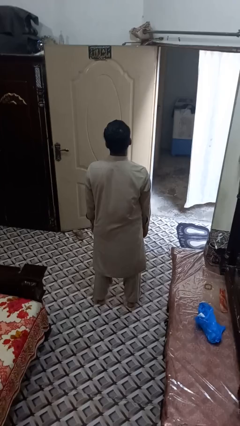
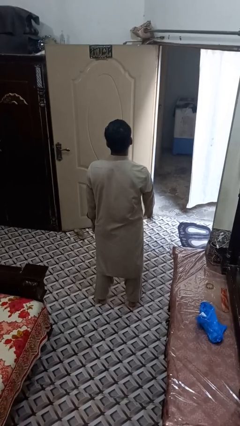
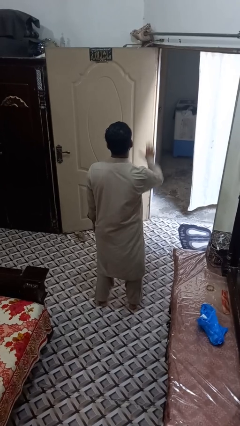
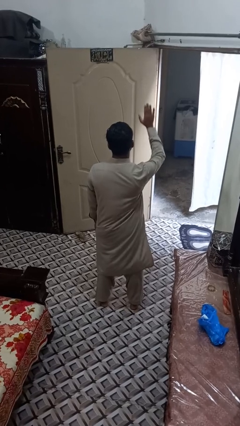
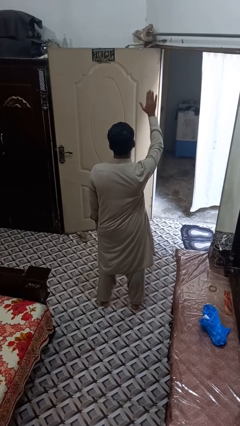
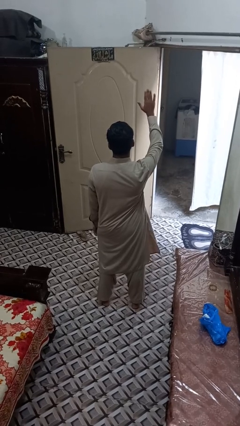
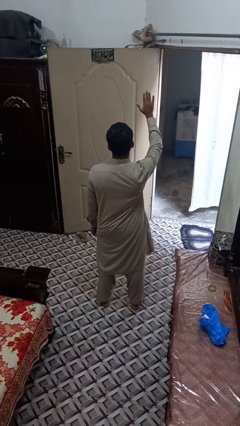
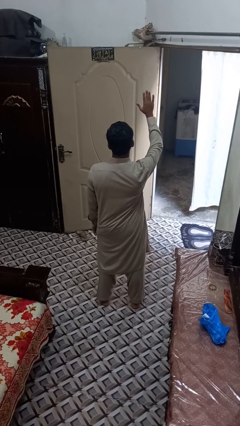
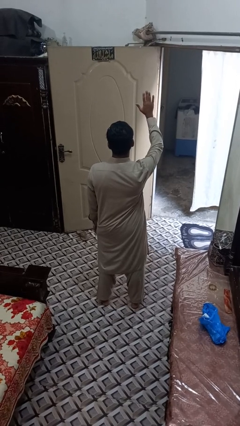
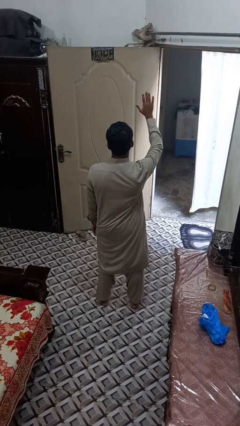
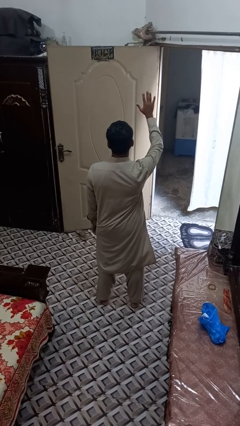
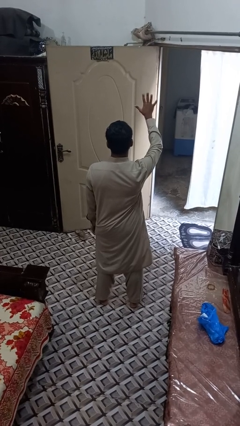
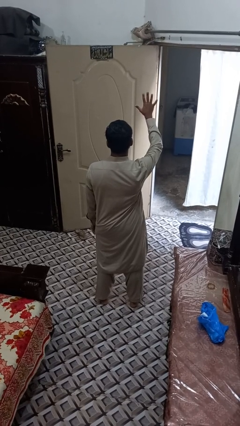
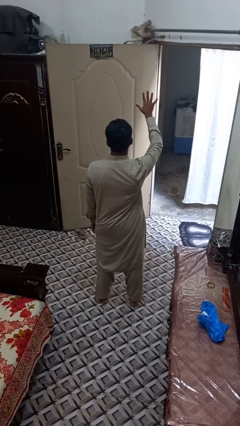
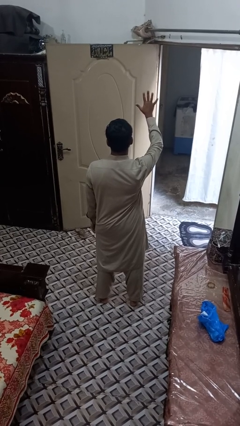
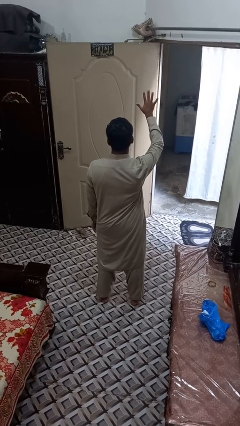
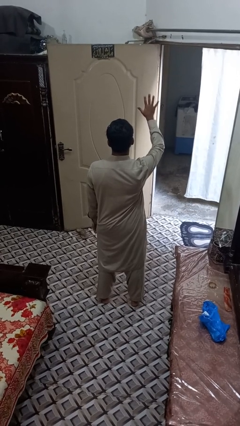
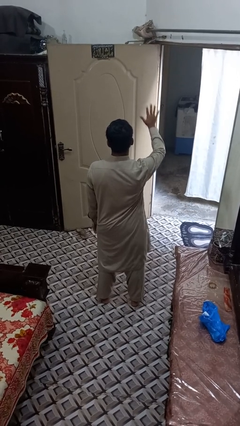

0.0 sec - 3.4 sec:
person gestures number five

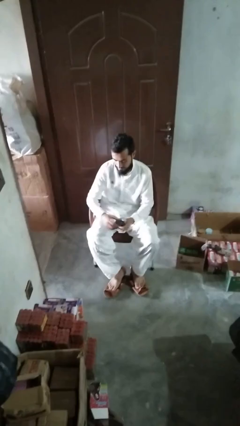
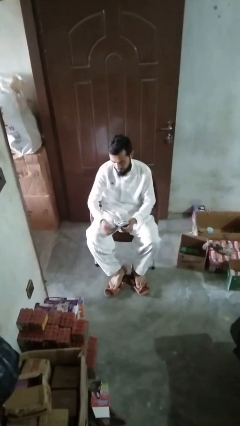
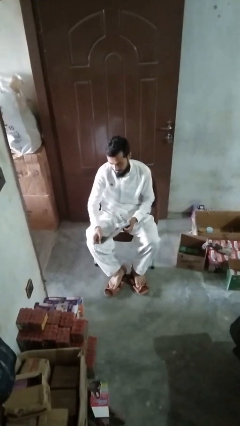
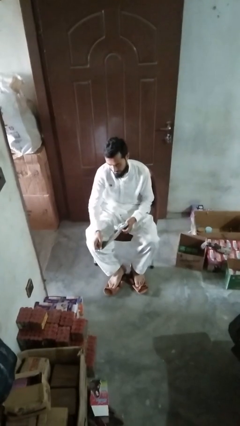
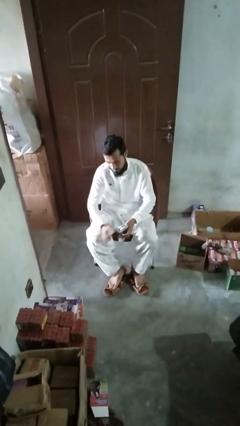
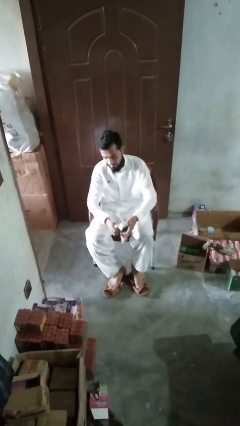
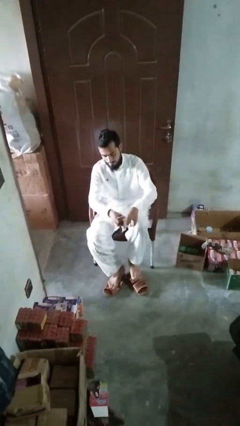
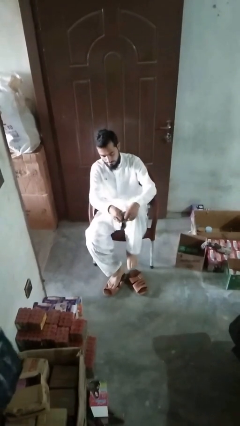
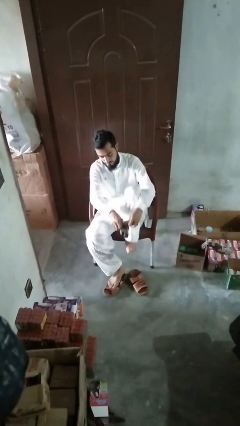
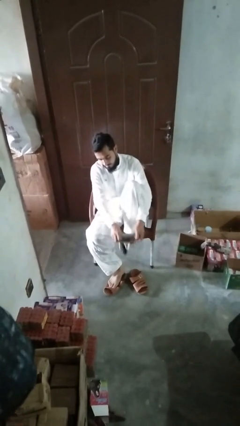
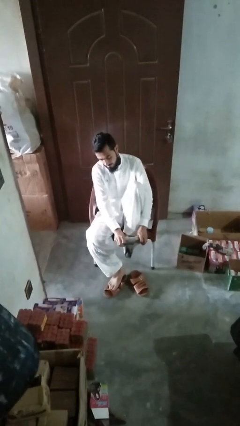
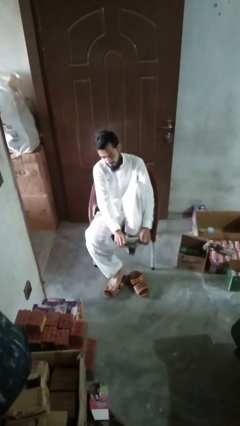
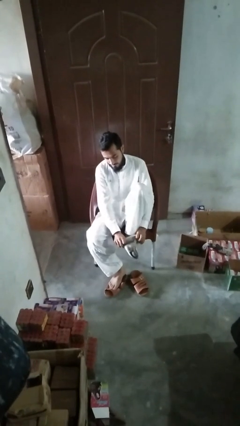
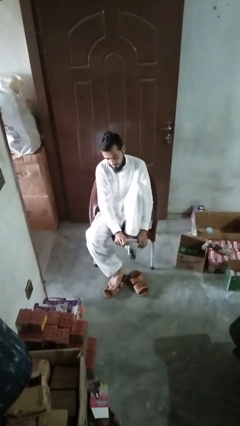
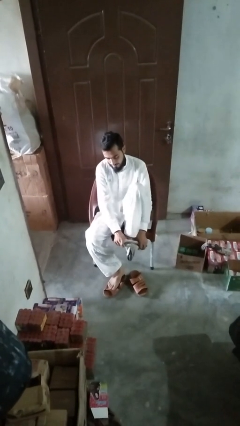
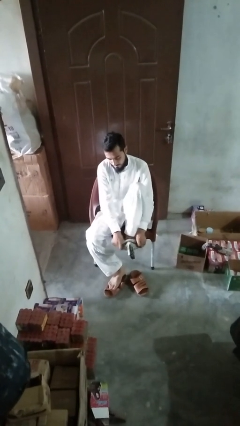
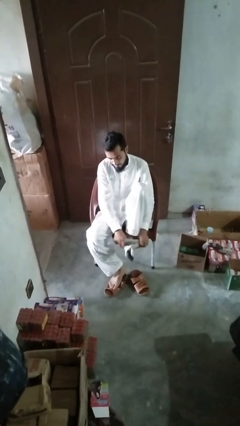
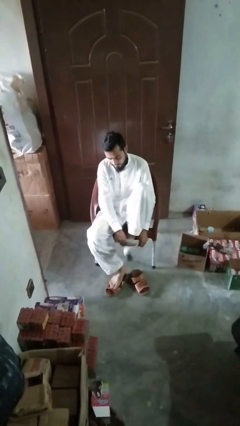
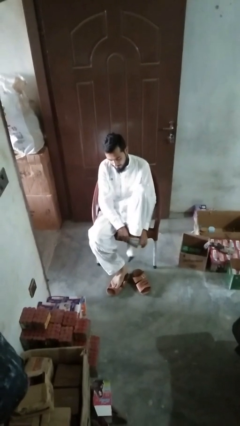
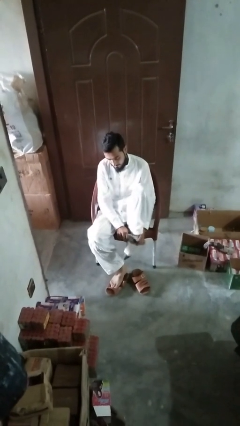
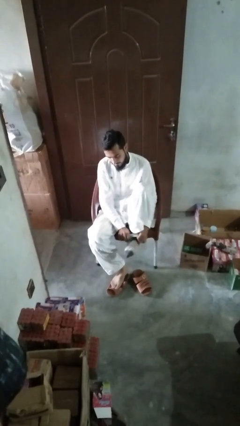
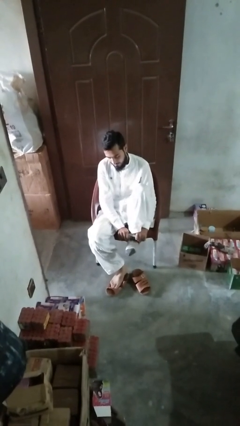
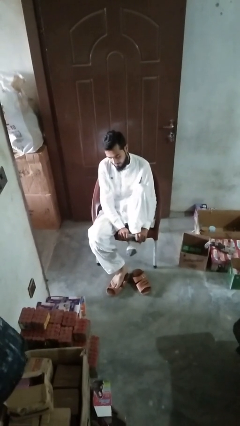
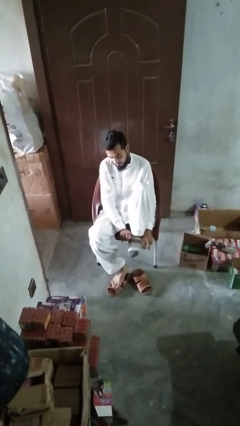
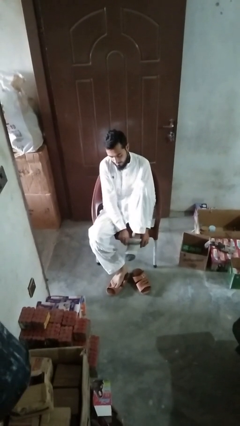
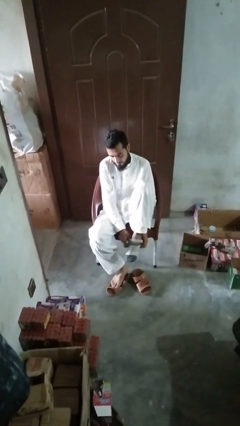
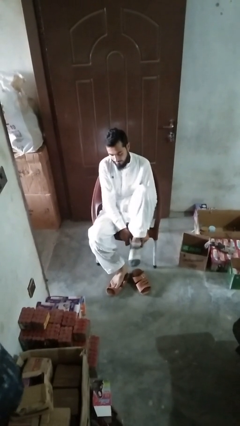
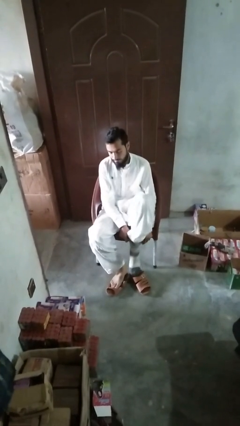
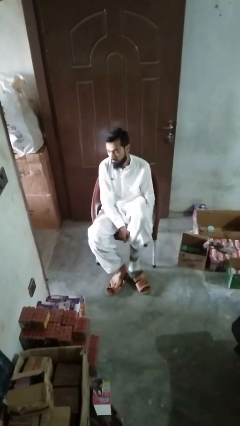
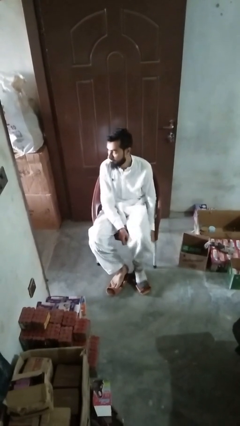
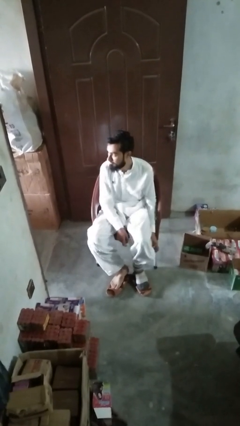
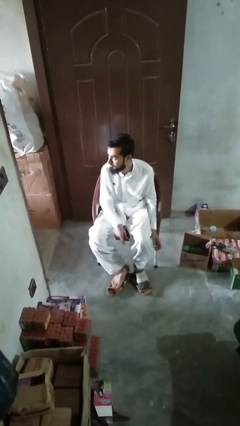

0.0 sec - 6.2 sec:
person puts on socks

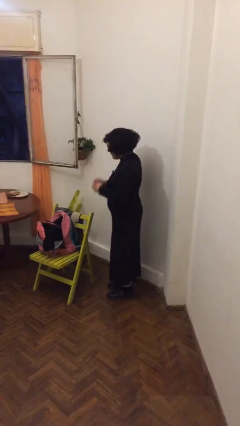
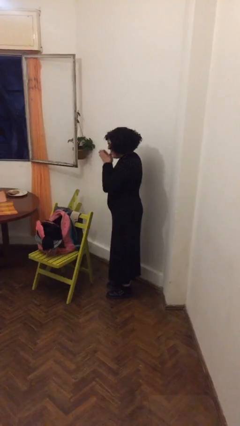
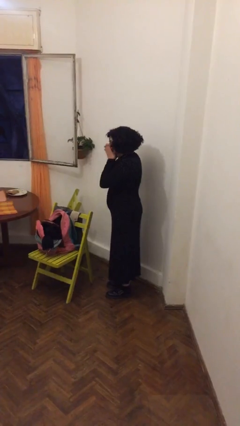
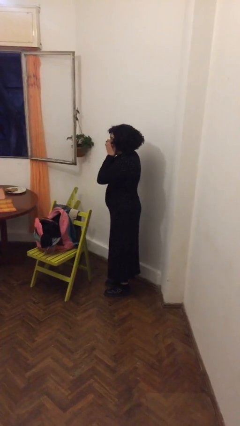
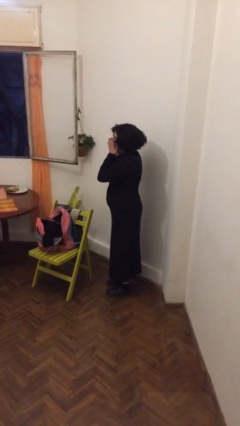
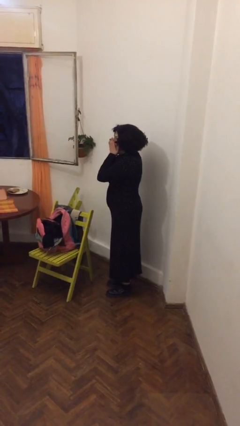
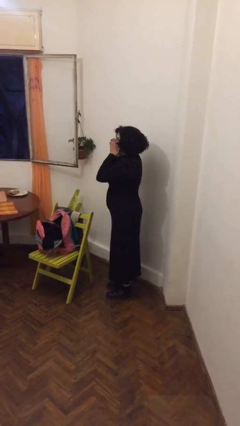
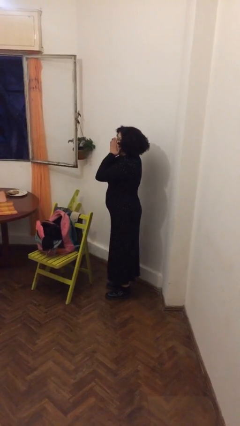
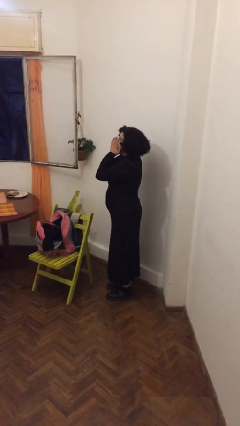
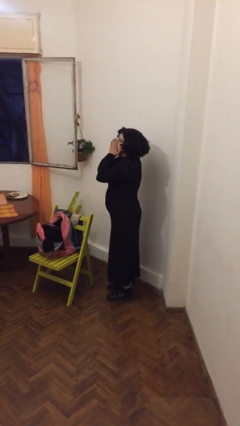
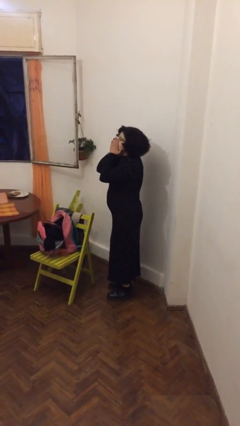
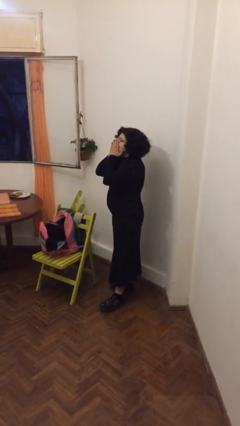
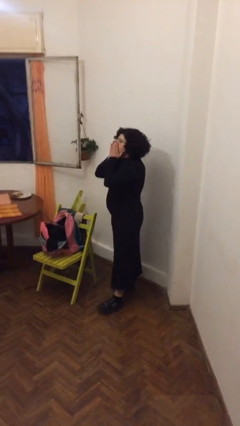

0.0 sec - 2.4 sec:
person yawns

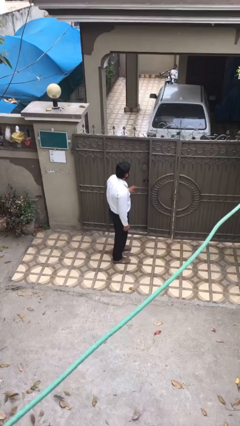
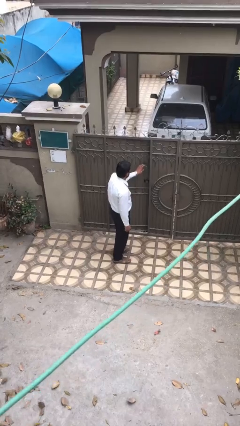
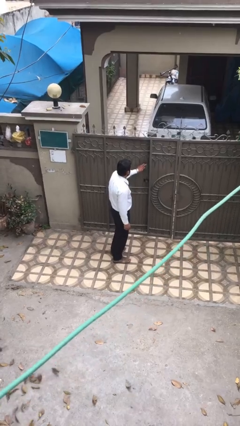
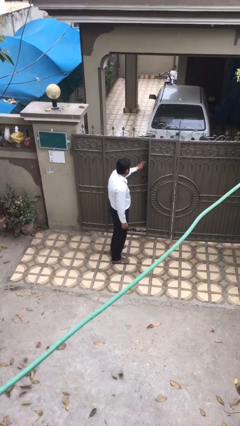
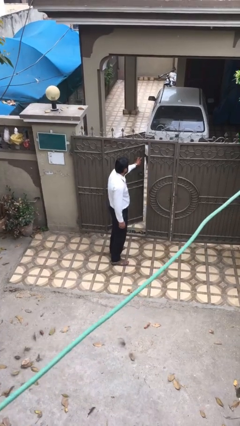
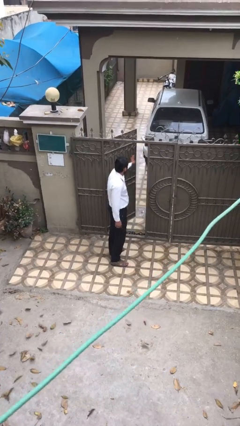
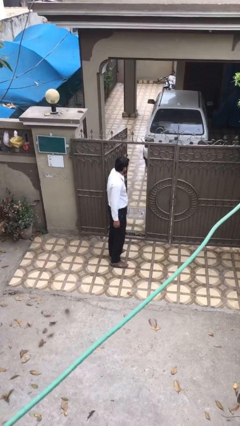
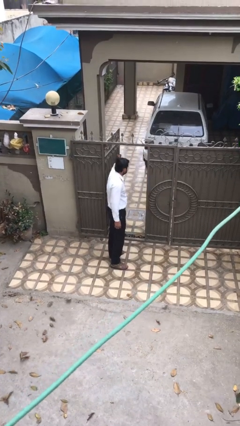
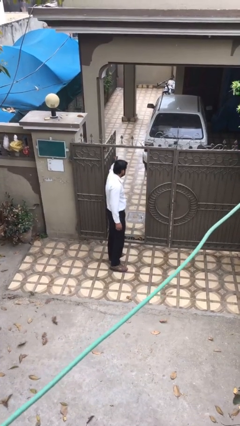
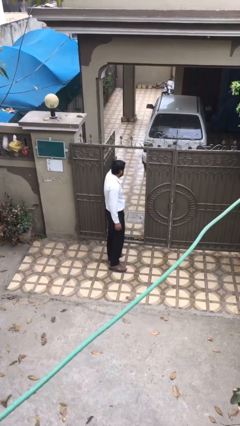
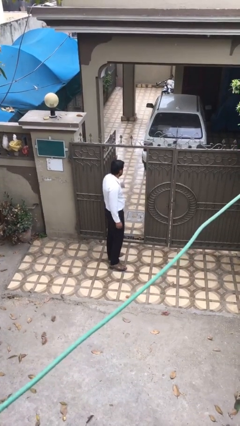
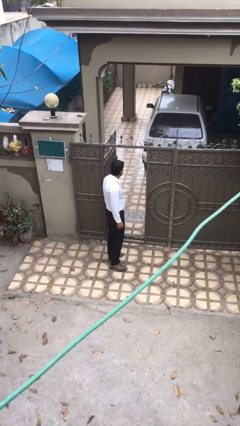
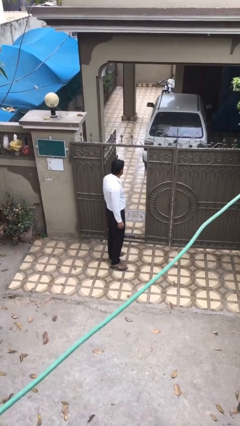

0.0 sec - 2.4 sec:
person opens facility door

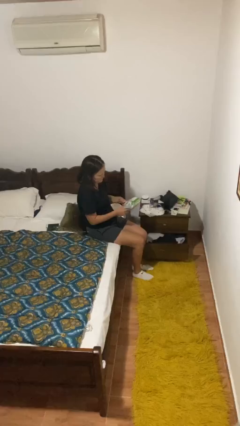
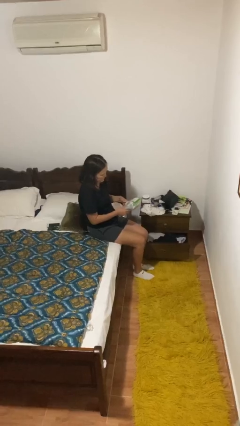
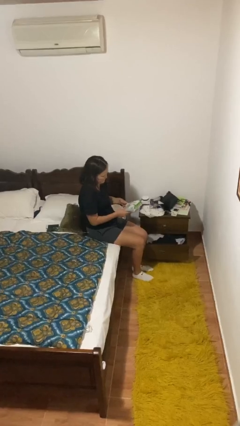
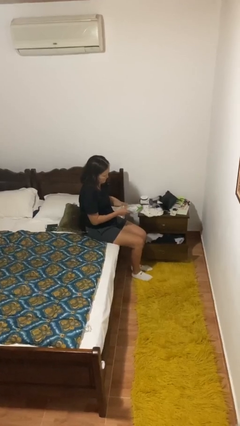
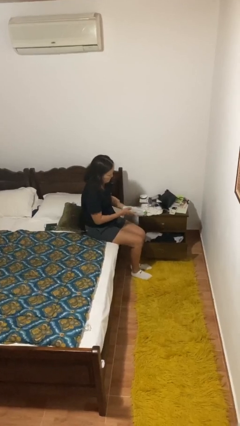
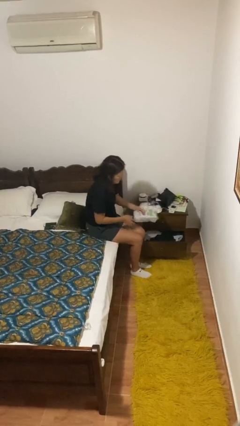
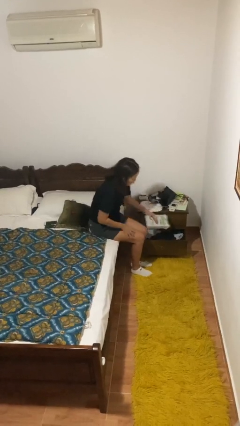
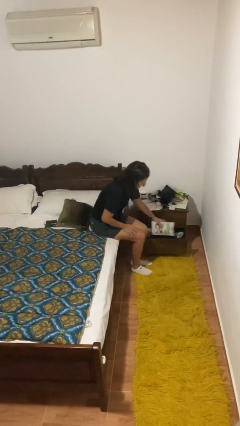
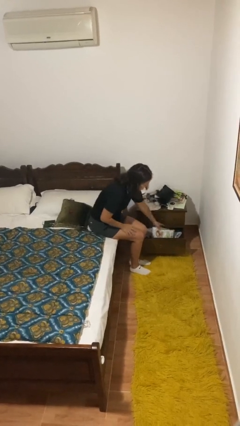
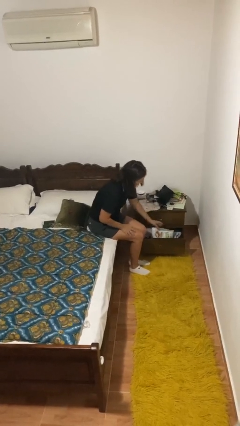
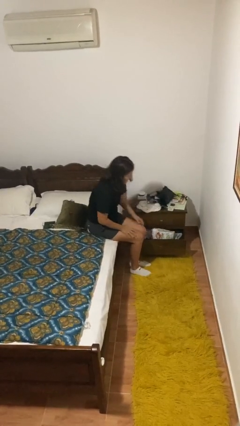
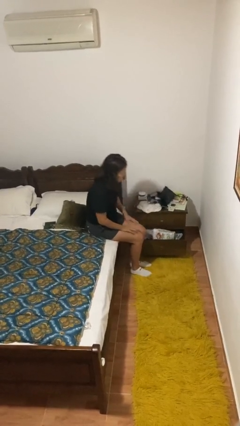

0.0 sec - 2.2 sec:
person puts down object into cabinet

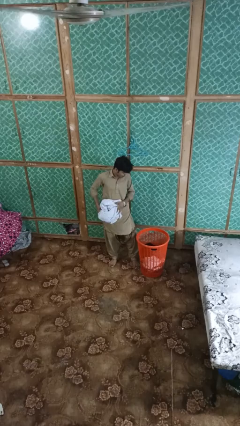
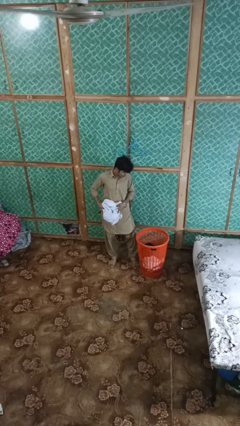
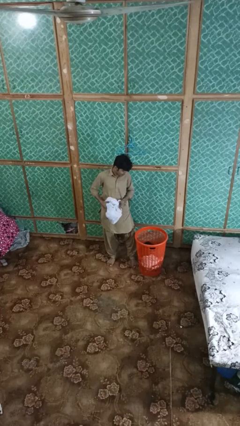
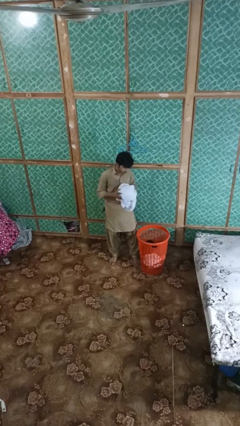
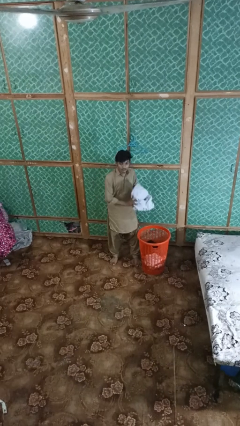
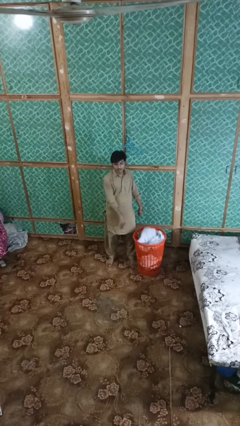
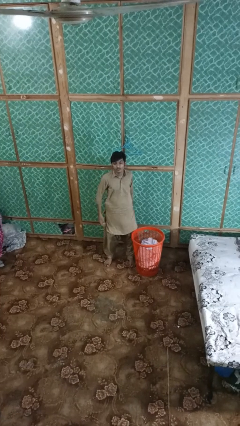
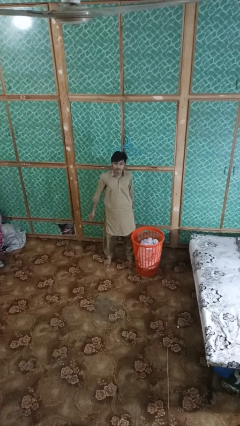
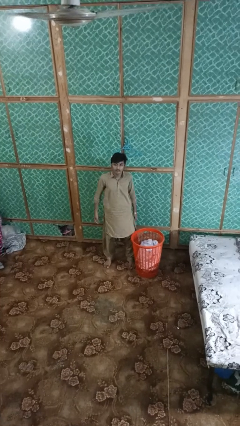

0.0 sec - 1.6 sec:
person puts object into basket
